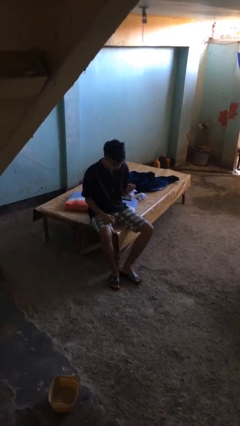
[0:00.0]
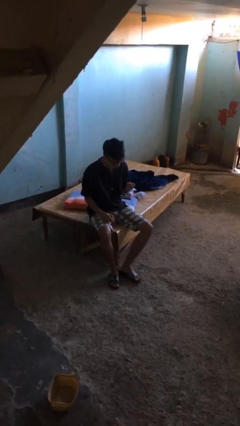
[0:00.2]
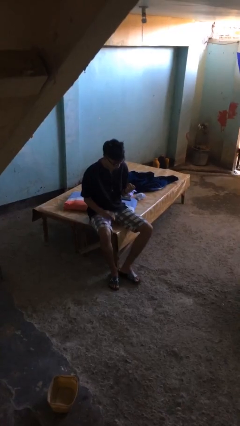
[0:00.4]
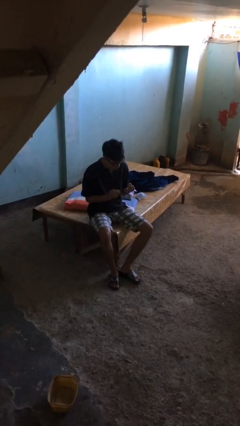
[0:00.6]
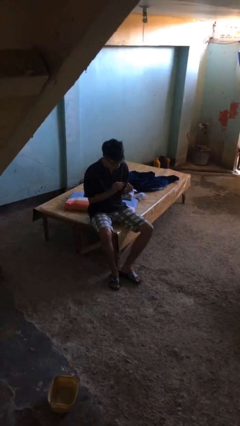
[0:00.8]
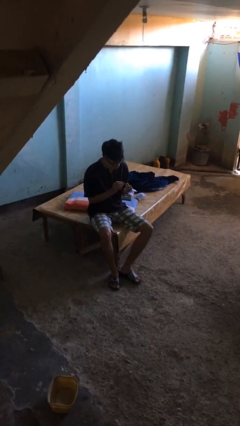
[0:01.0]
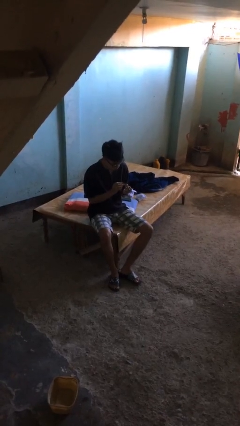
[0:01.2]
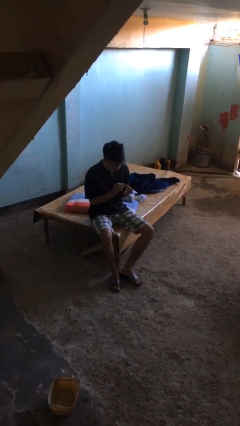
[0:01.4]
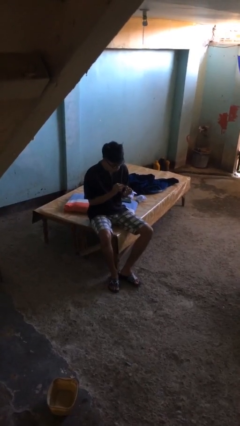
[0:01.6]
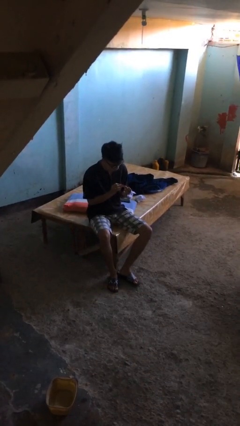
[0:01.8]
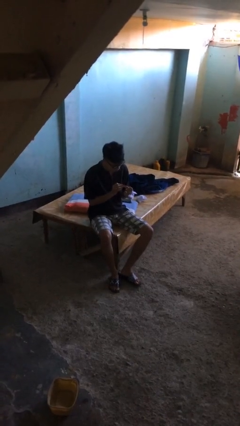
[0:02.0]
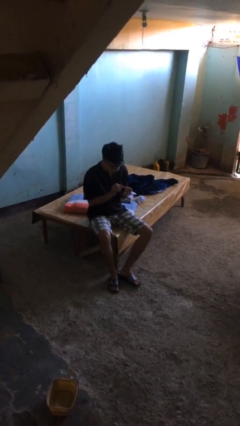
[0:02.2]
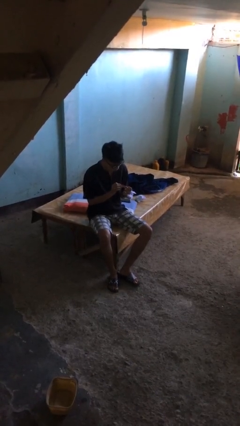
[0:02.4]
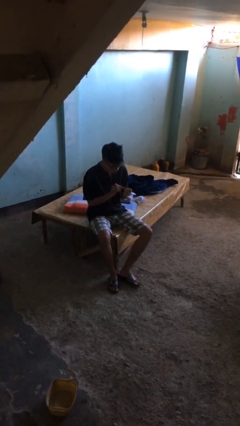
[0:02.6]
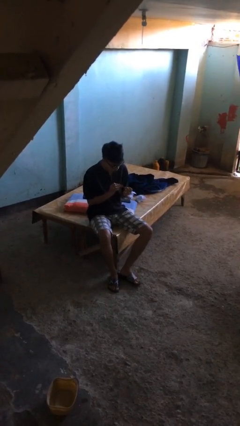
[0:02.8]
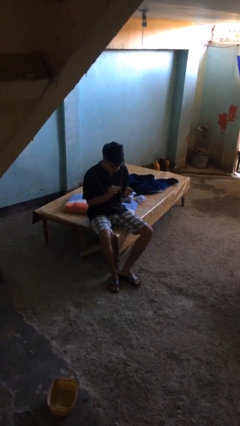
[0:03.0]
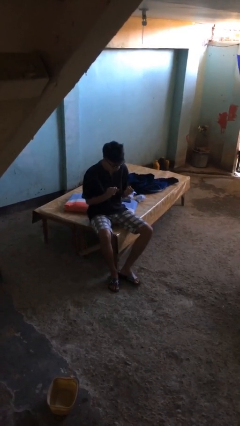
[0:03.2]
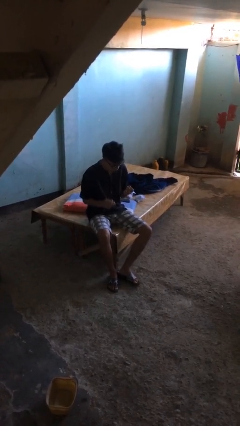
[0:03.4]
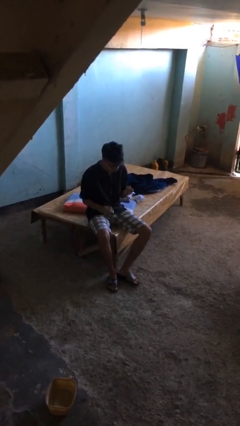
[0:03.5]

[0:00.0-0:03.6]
person clips fingernails

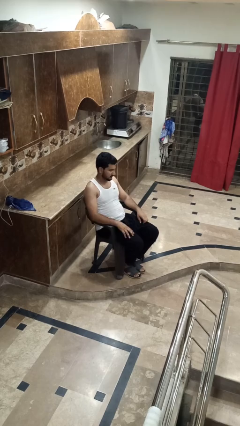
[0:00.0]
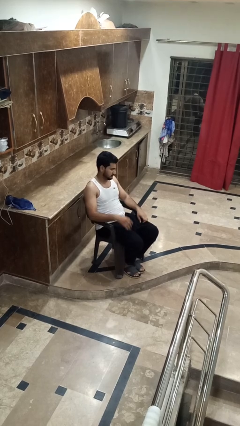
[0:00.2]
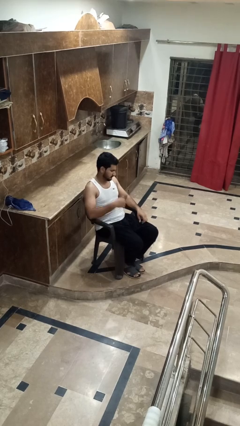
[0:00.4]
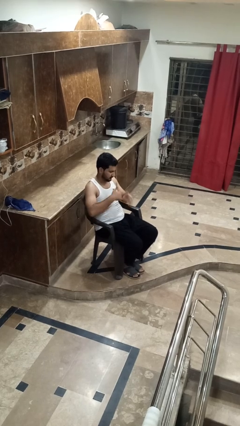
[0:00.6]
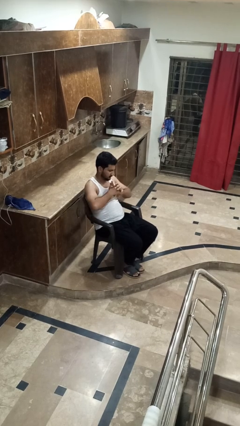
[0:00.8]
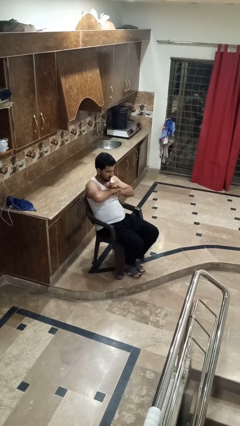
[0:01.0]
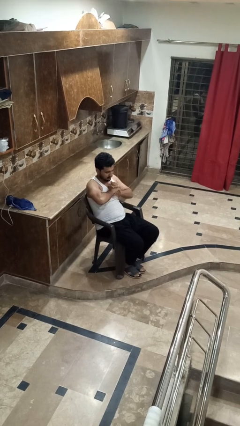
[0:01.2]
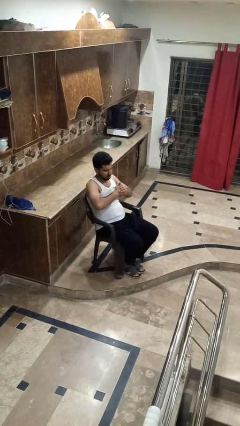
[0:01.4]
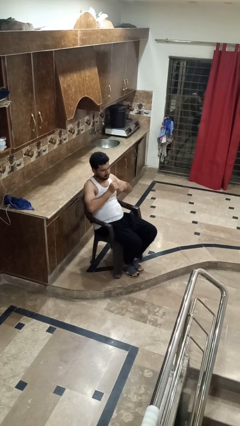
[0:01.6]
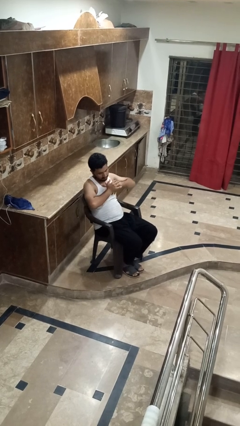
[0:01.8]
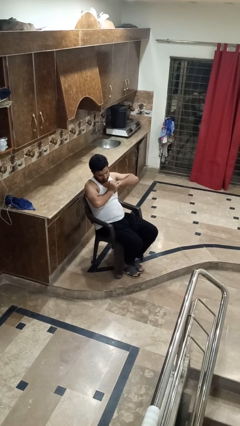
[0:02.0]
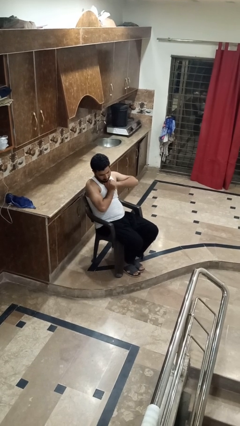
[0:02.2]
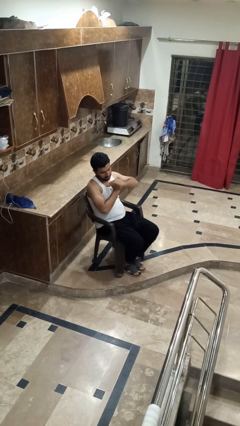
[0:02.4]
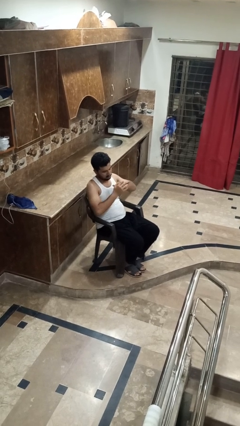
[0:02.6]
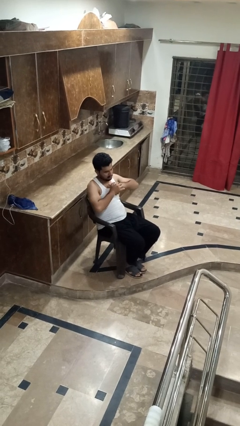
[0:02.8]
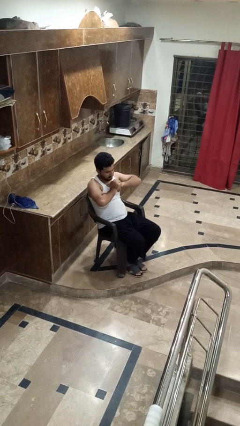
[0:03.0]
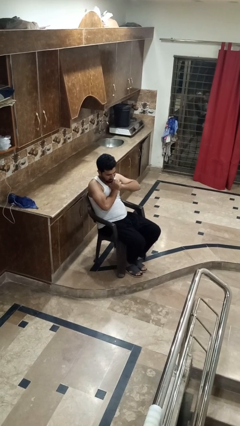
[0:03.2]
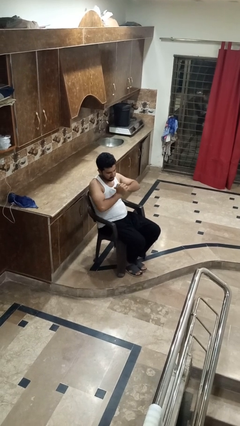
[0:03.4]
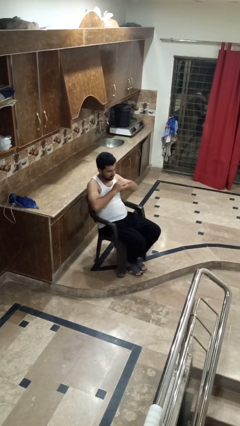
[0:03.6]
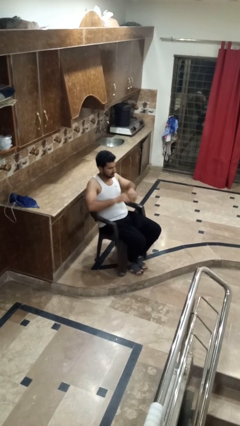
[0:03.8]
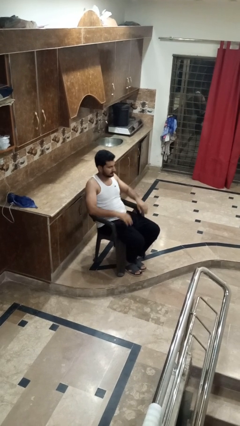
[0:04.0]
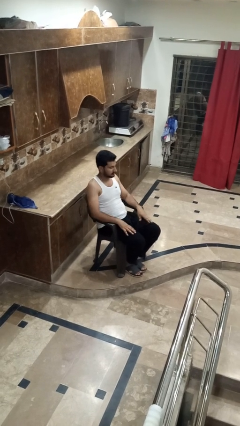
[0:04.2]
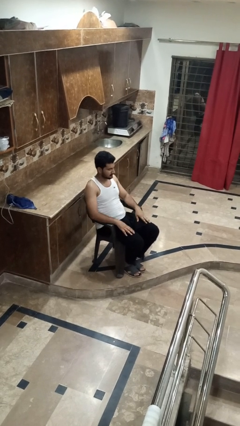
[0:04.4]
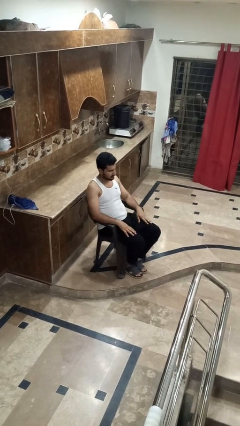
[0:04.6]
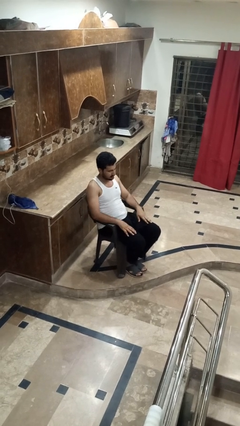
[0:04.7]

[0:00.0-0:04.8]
person cracks knuckles

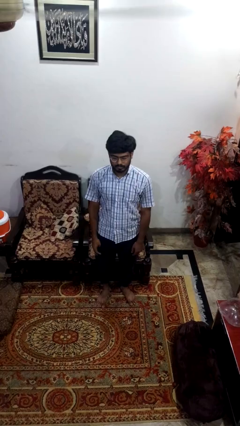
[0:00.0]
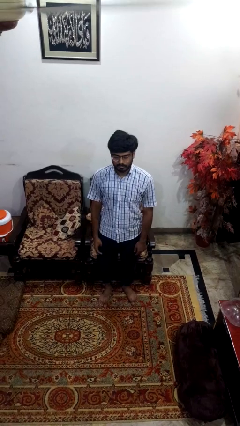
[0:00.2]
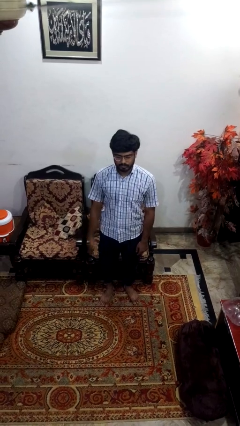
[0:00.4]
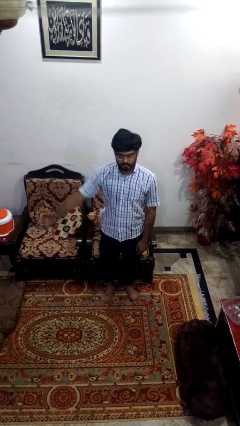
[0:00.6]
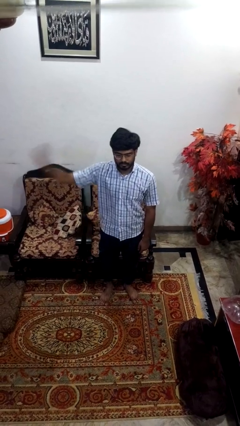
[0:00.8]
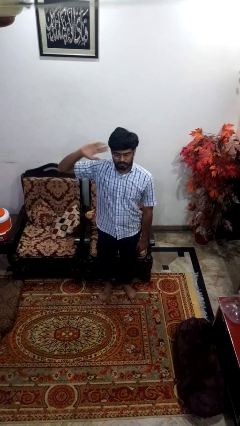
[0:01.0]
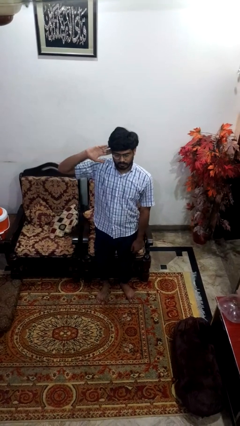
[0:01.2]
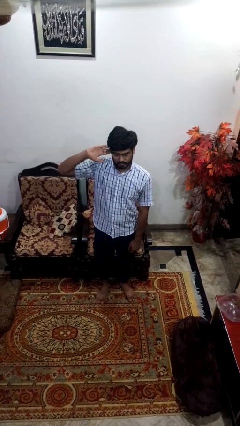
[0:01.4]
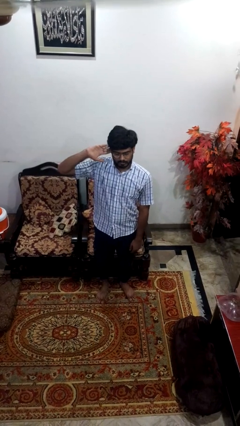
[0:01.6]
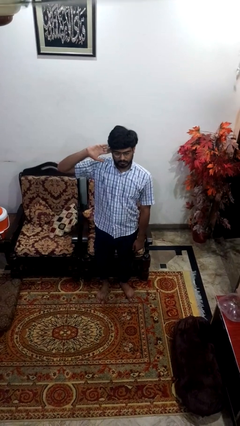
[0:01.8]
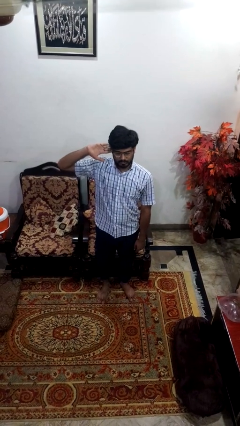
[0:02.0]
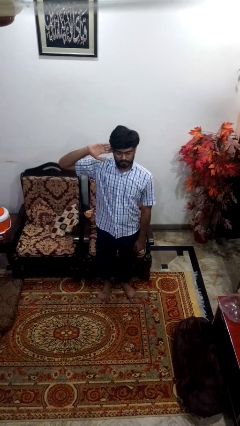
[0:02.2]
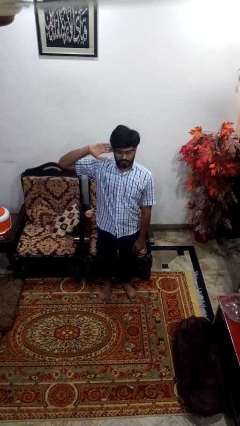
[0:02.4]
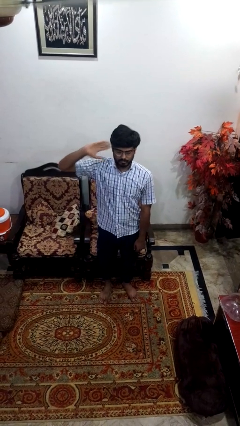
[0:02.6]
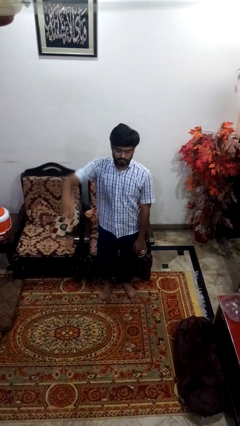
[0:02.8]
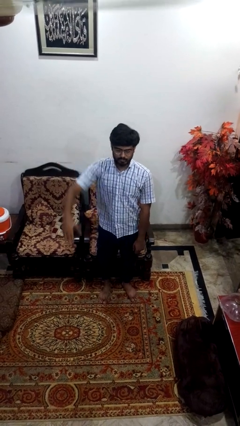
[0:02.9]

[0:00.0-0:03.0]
person salutes

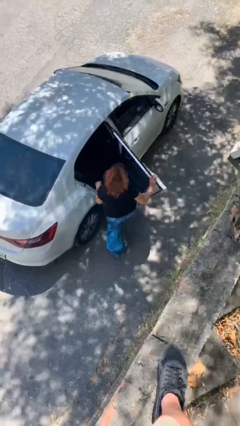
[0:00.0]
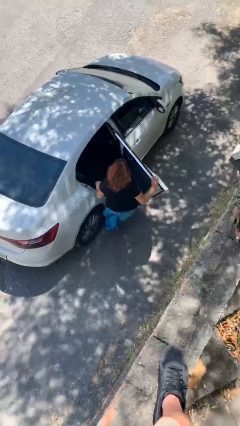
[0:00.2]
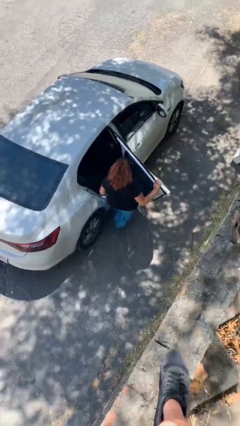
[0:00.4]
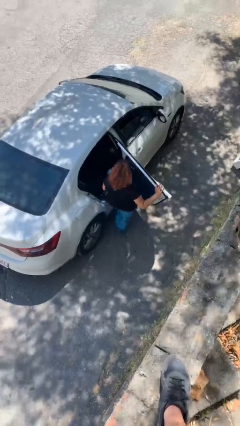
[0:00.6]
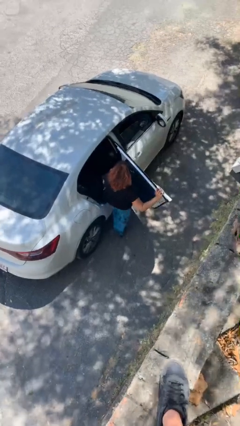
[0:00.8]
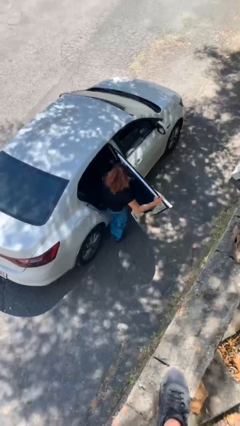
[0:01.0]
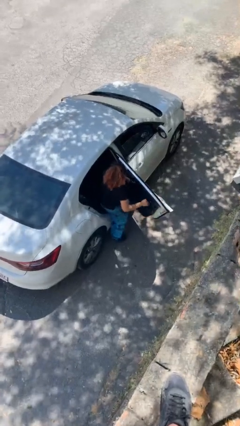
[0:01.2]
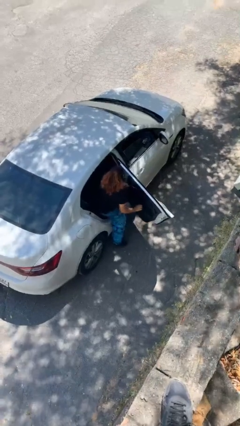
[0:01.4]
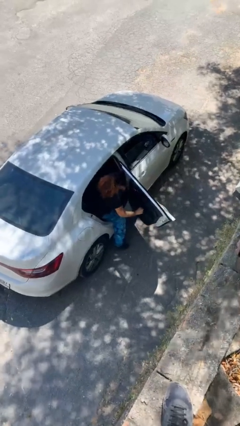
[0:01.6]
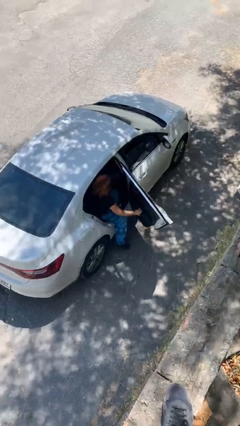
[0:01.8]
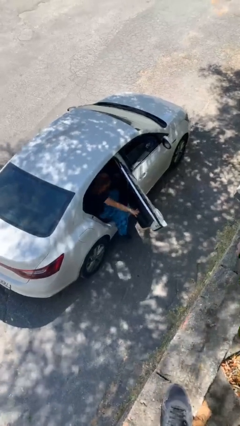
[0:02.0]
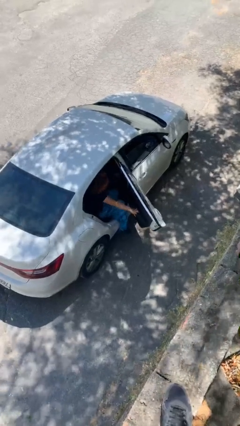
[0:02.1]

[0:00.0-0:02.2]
person enters car

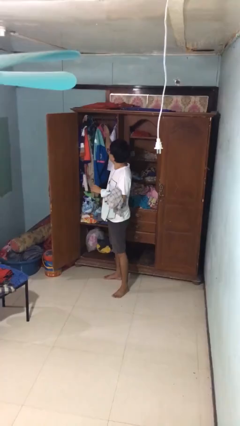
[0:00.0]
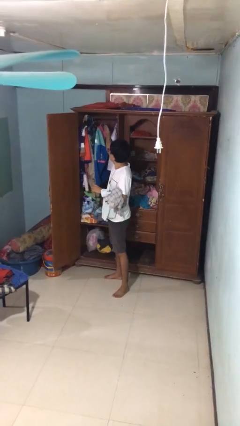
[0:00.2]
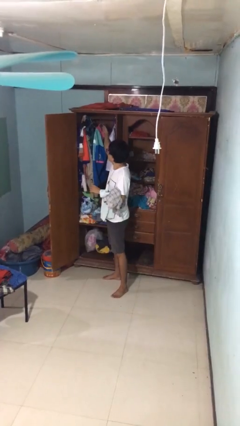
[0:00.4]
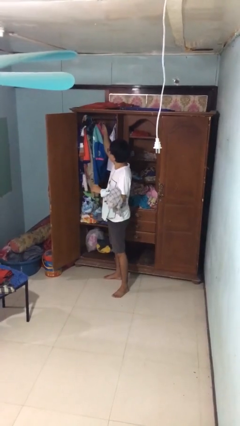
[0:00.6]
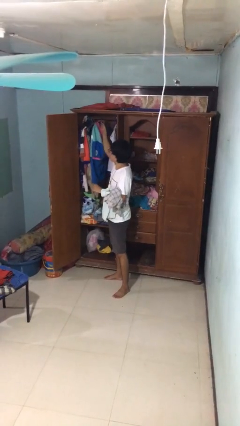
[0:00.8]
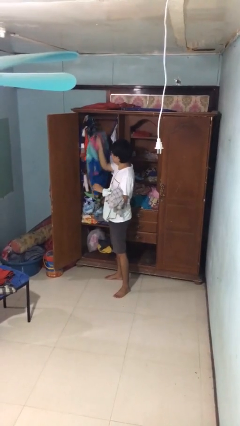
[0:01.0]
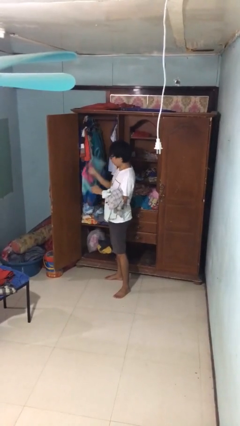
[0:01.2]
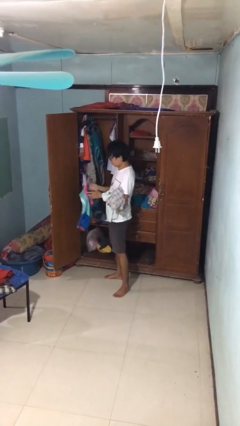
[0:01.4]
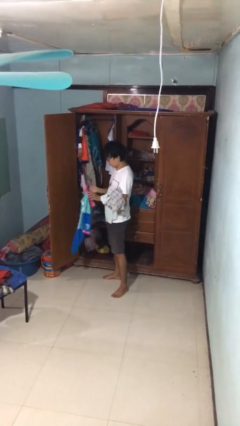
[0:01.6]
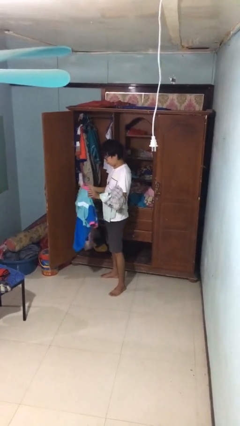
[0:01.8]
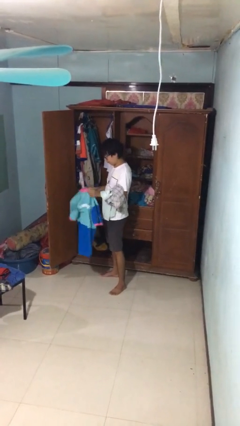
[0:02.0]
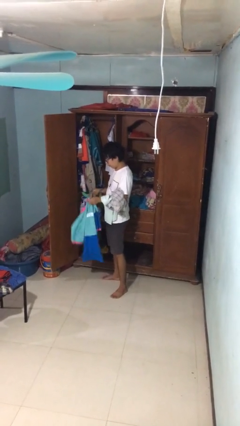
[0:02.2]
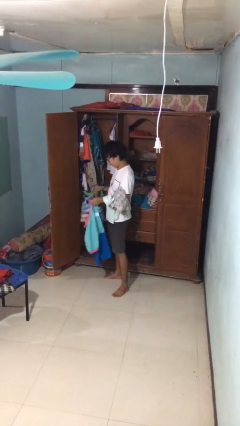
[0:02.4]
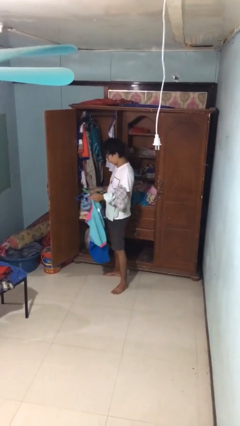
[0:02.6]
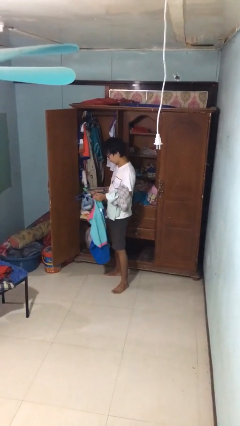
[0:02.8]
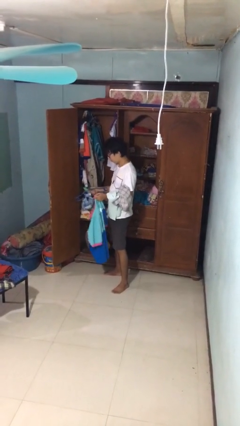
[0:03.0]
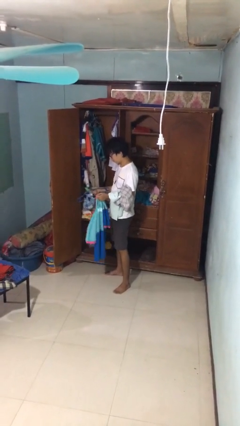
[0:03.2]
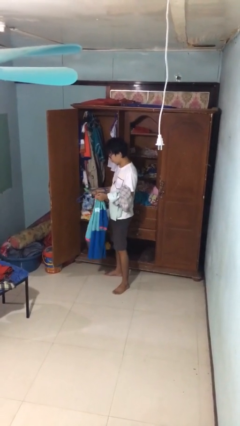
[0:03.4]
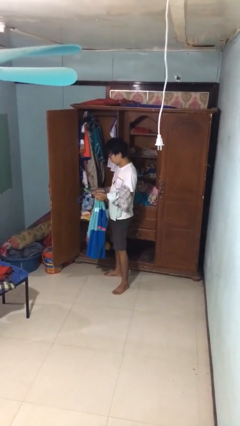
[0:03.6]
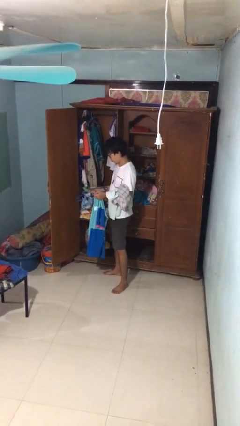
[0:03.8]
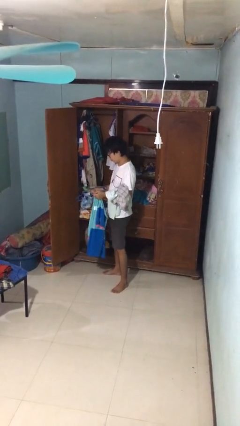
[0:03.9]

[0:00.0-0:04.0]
person takes clothes from closet
